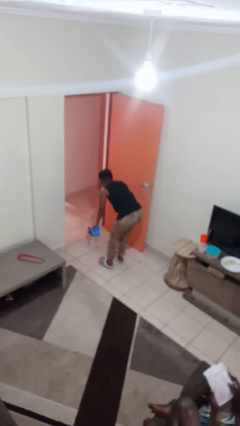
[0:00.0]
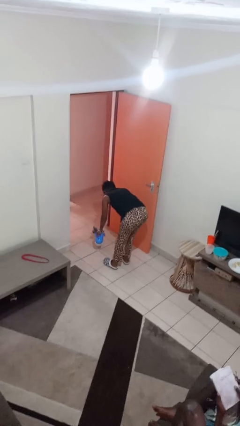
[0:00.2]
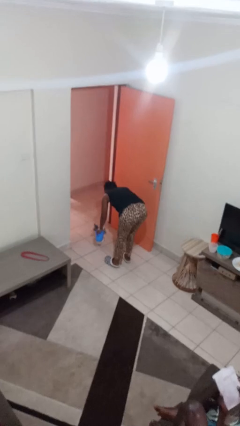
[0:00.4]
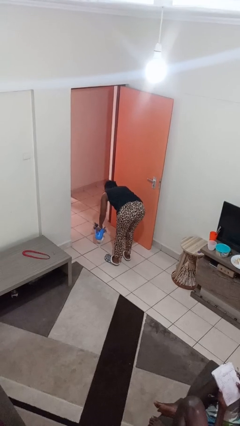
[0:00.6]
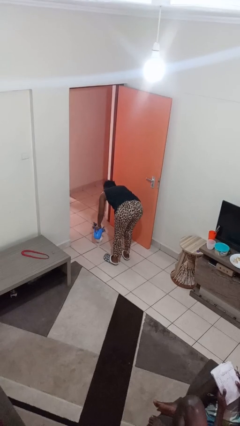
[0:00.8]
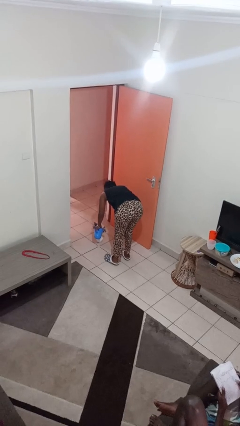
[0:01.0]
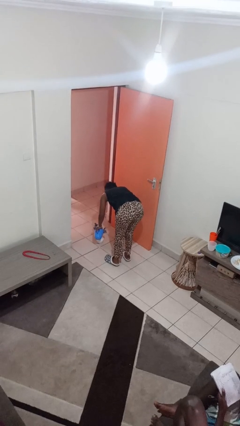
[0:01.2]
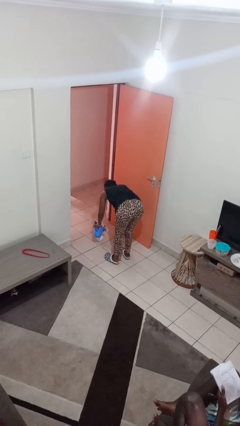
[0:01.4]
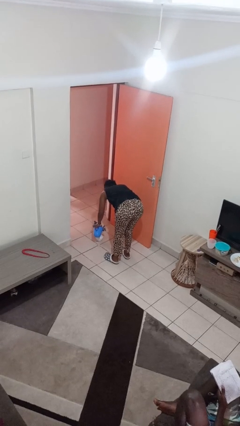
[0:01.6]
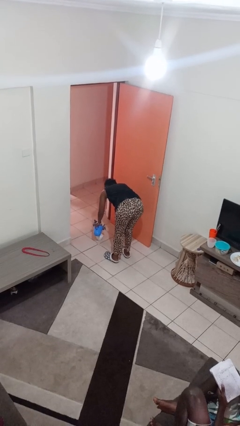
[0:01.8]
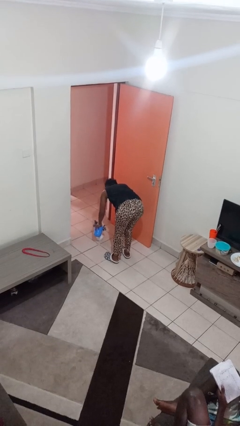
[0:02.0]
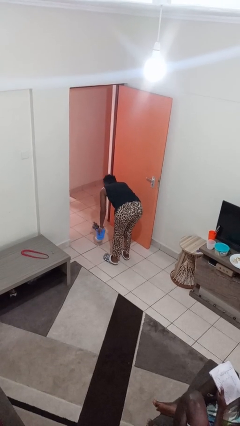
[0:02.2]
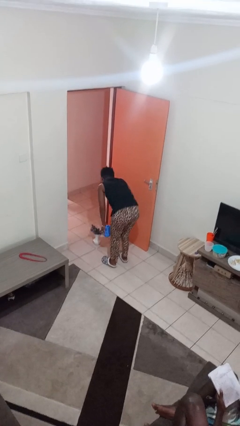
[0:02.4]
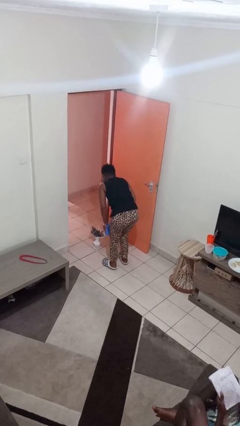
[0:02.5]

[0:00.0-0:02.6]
person waters houseplant

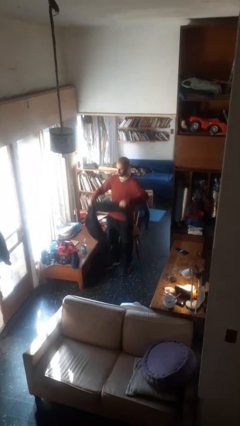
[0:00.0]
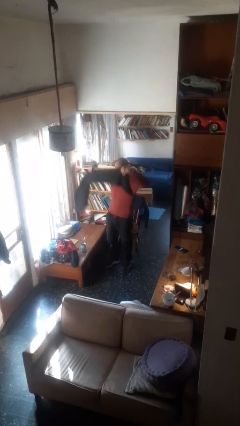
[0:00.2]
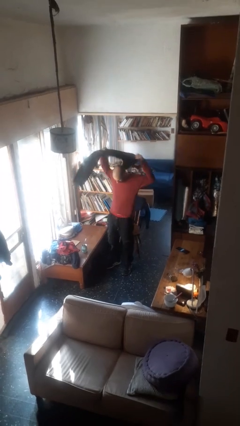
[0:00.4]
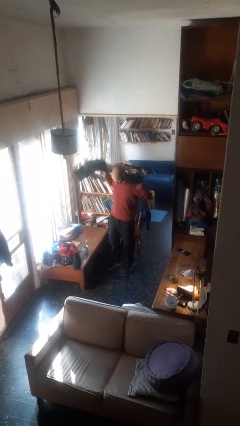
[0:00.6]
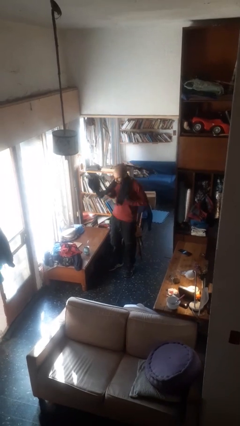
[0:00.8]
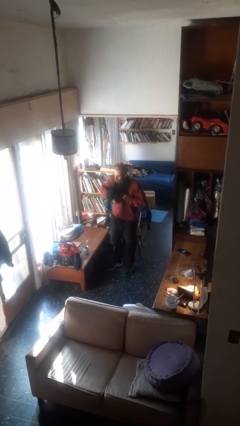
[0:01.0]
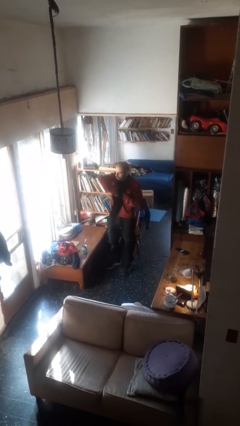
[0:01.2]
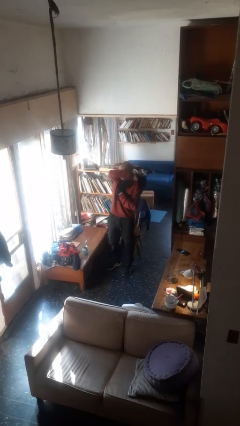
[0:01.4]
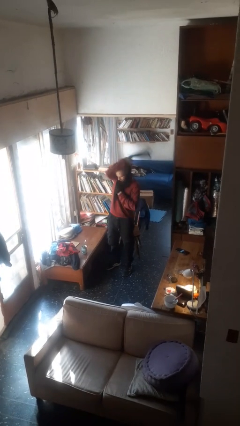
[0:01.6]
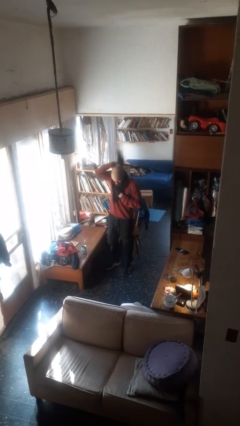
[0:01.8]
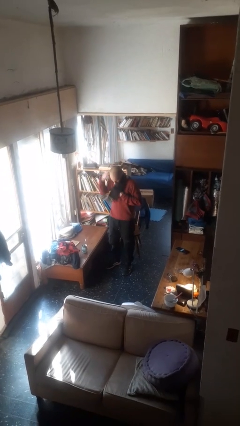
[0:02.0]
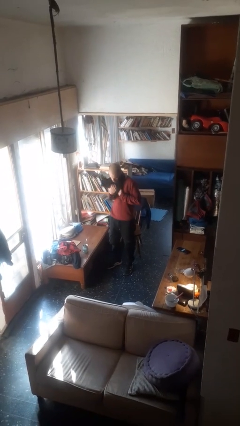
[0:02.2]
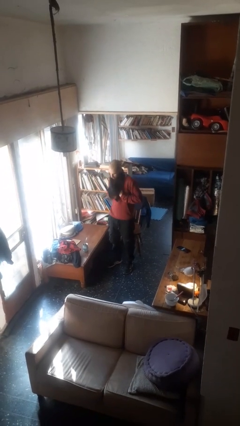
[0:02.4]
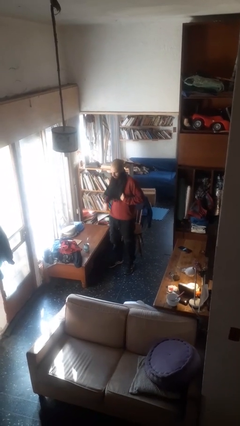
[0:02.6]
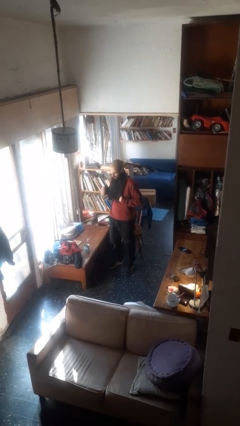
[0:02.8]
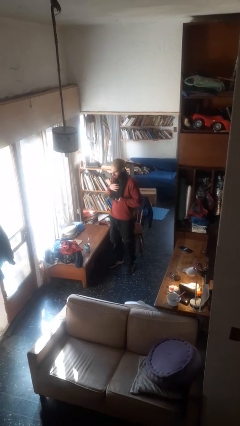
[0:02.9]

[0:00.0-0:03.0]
person puts on scarf

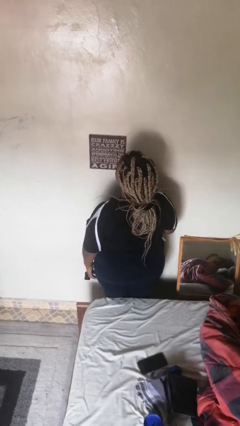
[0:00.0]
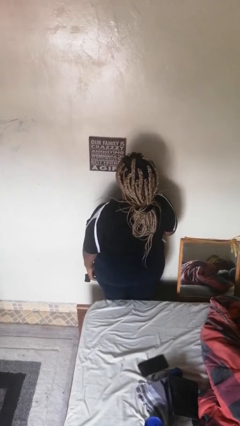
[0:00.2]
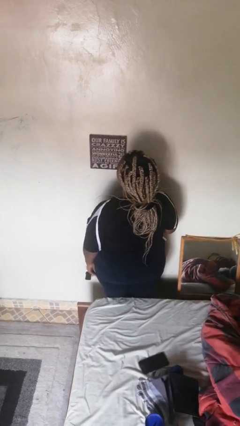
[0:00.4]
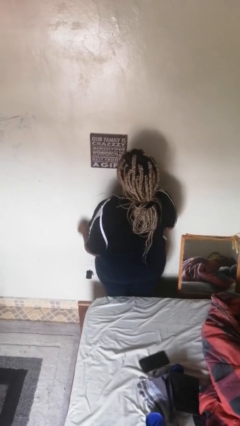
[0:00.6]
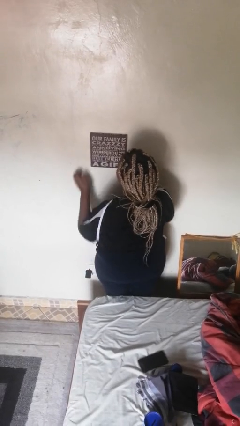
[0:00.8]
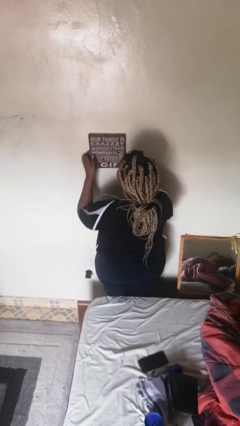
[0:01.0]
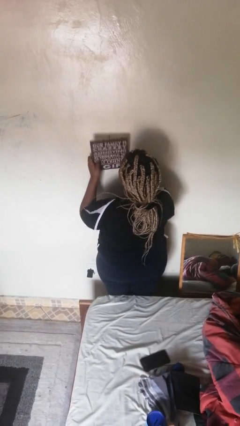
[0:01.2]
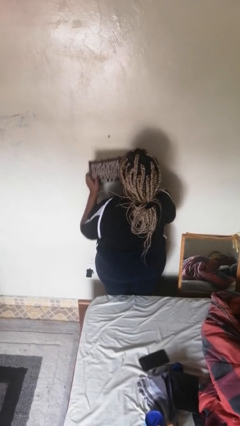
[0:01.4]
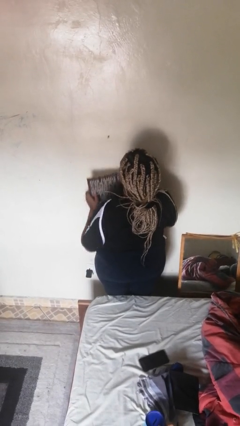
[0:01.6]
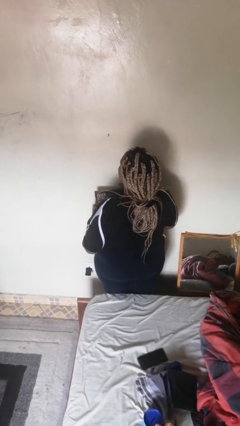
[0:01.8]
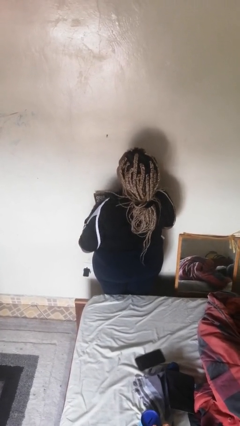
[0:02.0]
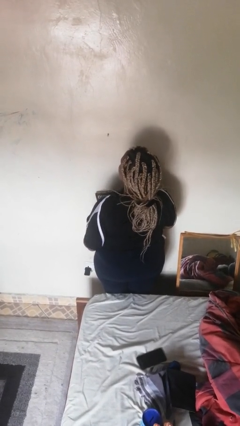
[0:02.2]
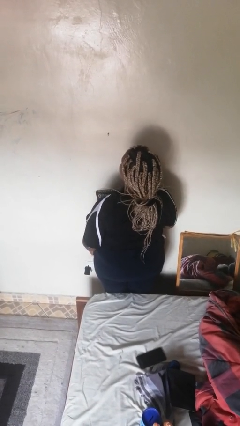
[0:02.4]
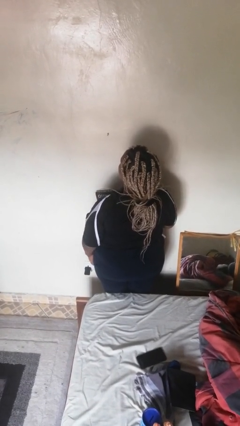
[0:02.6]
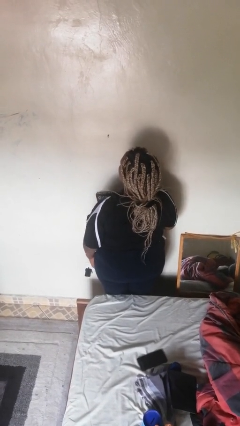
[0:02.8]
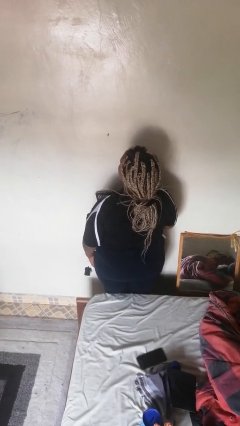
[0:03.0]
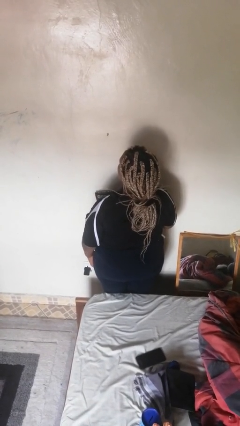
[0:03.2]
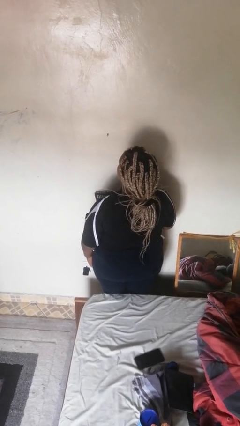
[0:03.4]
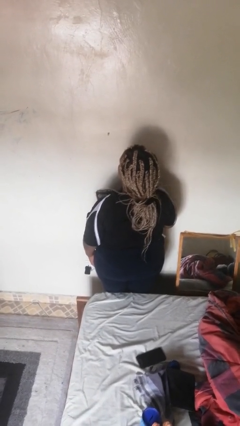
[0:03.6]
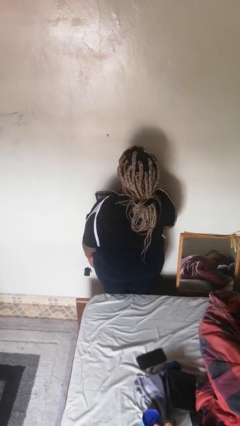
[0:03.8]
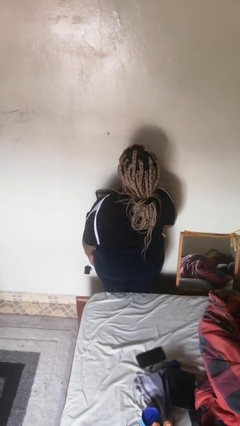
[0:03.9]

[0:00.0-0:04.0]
person takes down picture frame

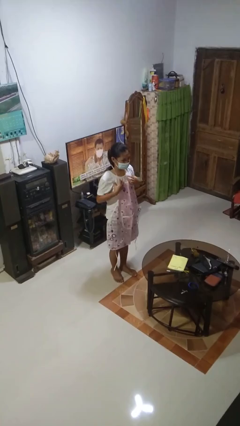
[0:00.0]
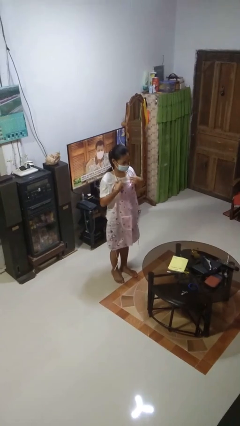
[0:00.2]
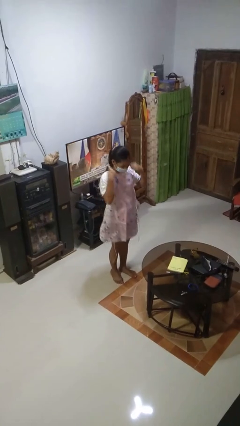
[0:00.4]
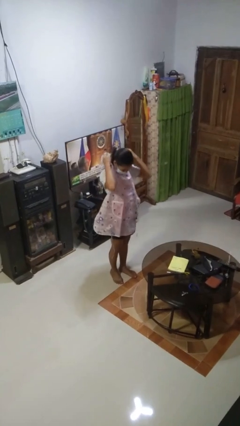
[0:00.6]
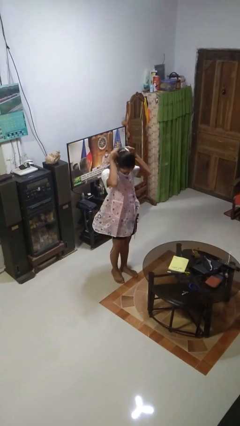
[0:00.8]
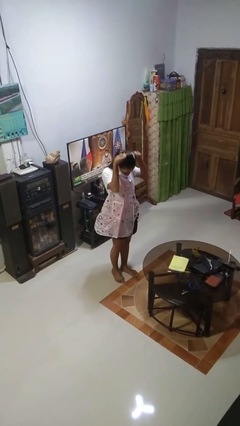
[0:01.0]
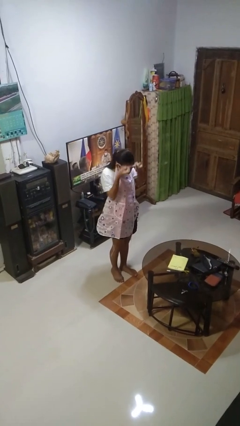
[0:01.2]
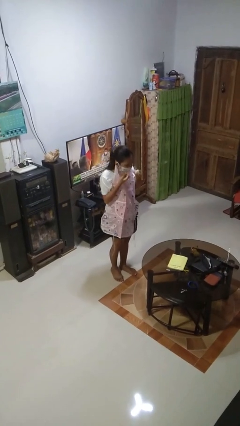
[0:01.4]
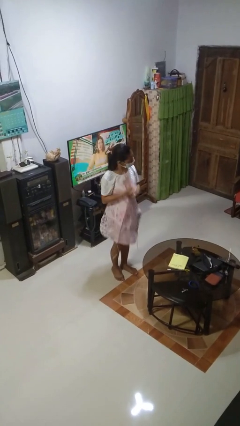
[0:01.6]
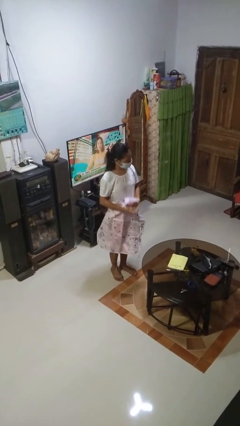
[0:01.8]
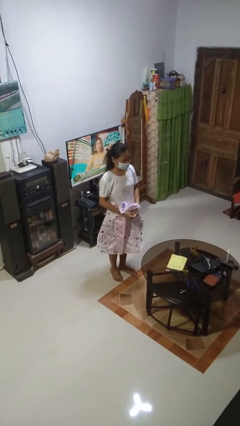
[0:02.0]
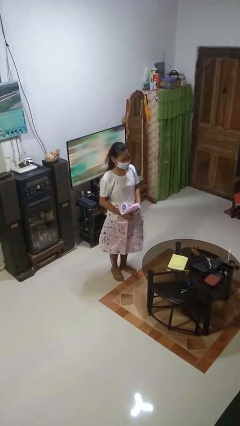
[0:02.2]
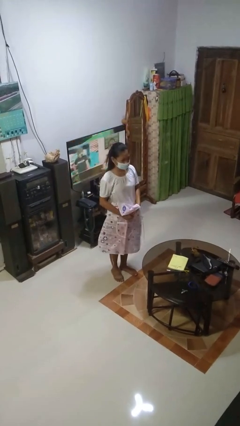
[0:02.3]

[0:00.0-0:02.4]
person takes off apron

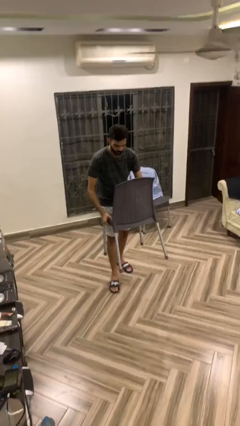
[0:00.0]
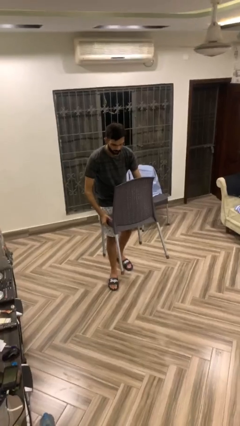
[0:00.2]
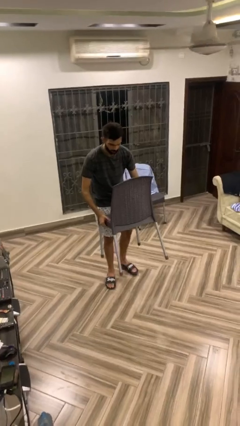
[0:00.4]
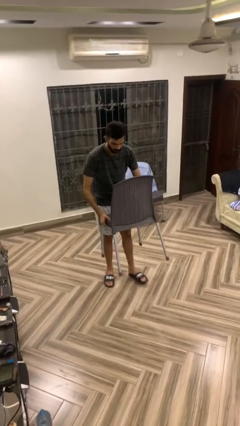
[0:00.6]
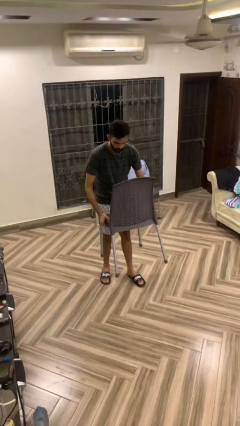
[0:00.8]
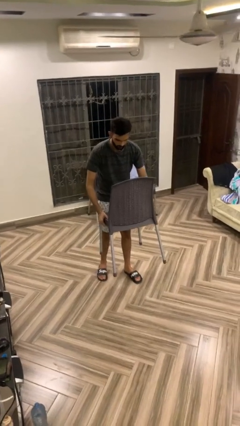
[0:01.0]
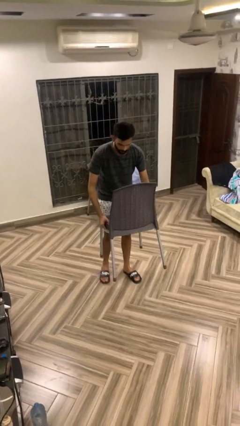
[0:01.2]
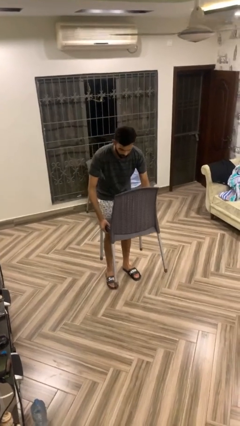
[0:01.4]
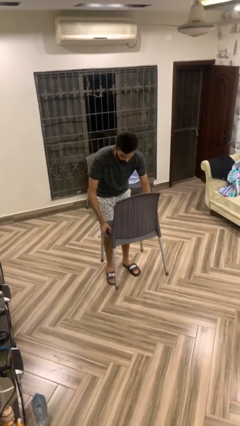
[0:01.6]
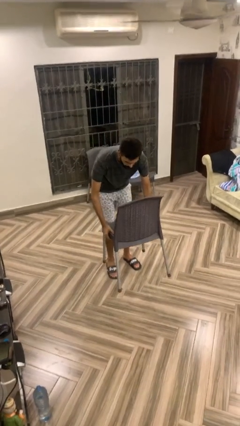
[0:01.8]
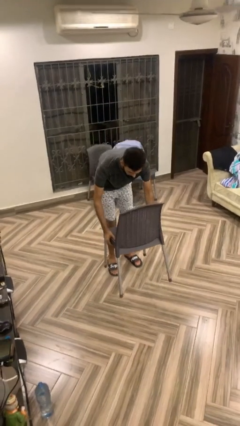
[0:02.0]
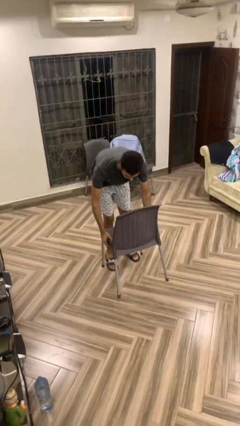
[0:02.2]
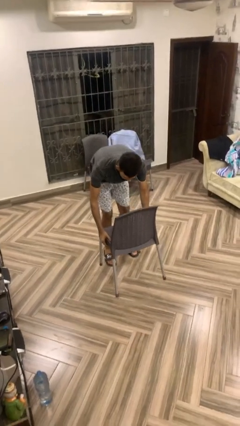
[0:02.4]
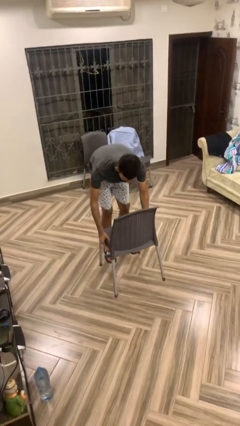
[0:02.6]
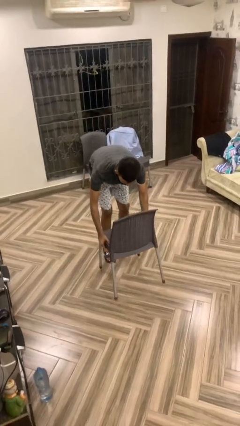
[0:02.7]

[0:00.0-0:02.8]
person puts down object on floor

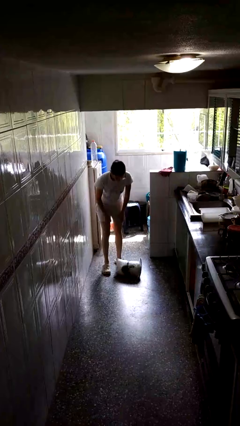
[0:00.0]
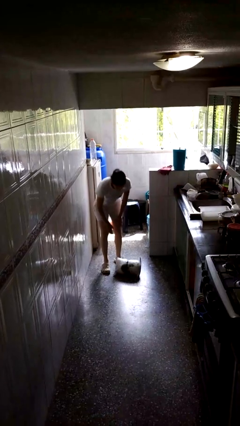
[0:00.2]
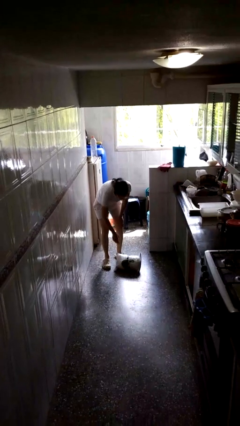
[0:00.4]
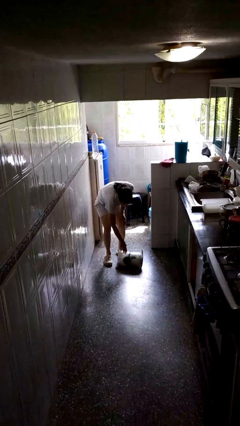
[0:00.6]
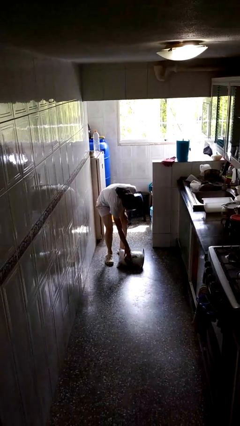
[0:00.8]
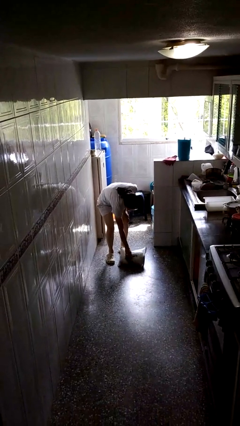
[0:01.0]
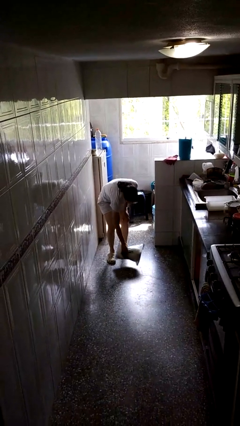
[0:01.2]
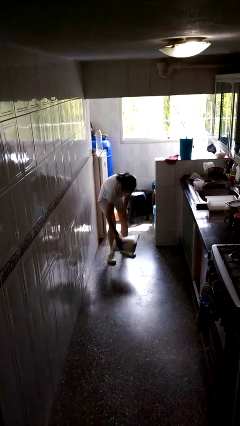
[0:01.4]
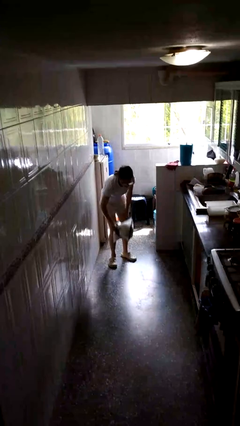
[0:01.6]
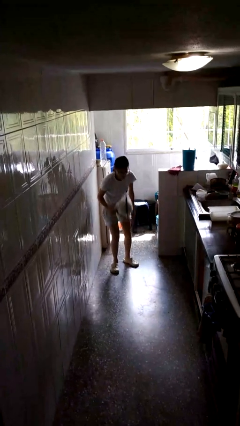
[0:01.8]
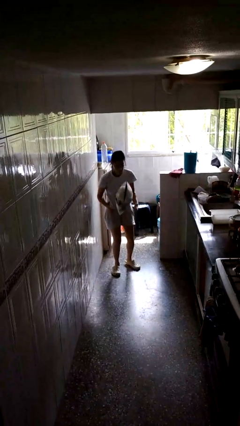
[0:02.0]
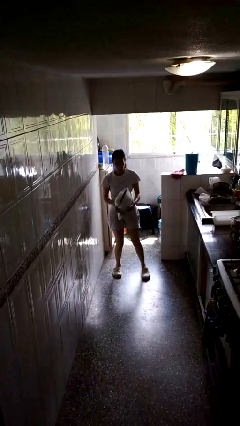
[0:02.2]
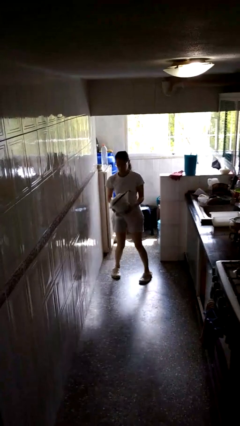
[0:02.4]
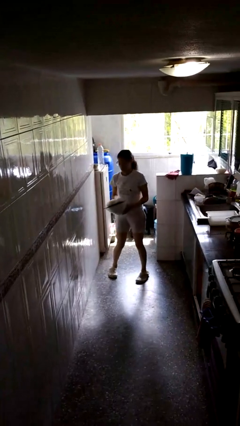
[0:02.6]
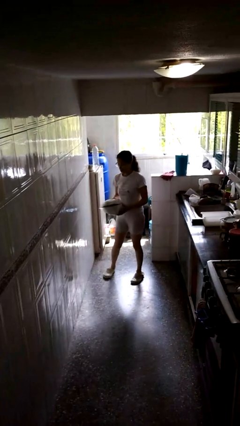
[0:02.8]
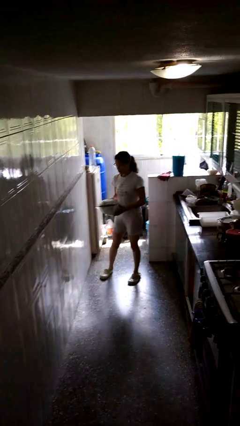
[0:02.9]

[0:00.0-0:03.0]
person picks up object from floor
